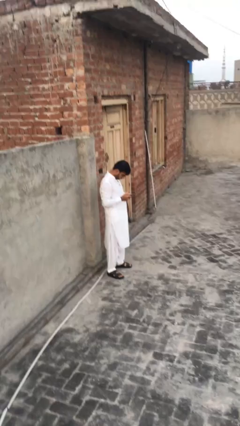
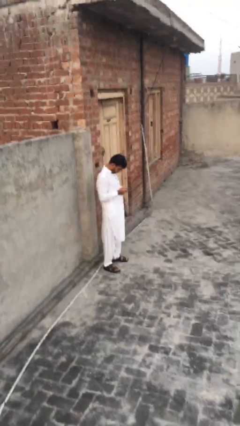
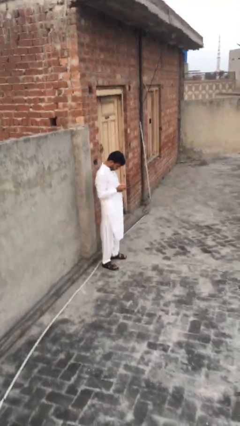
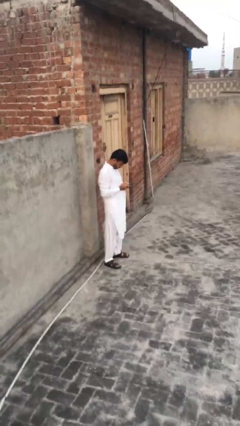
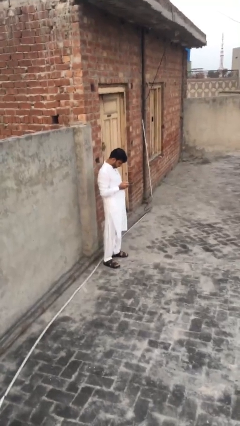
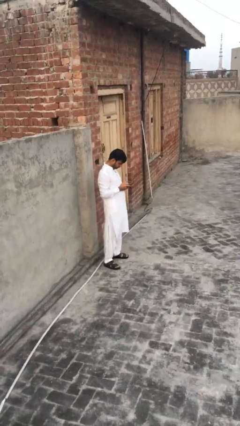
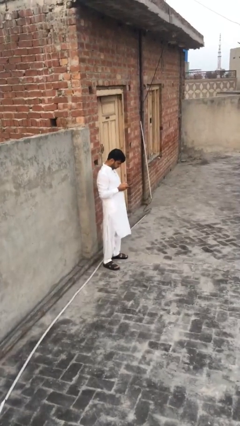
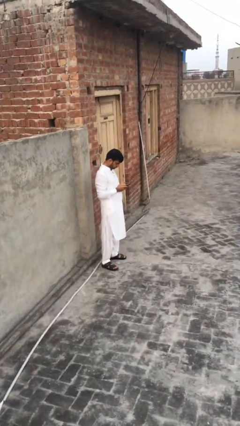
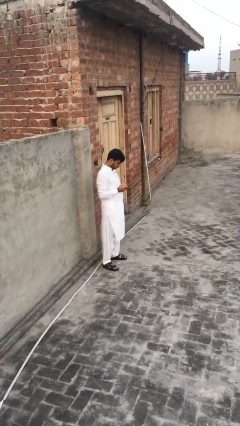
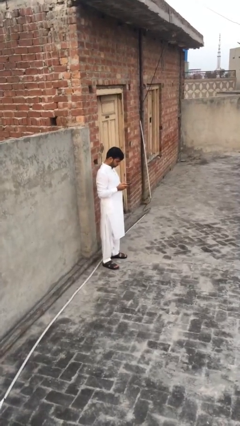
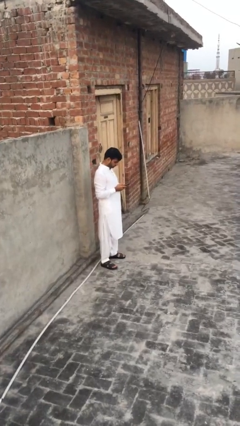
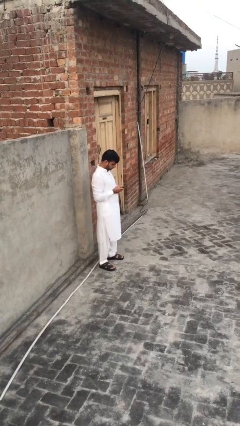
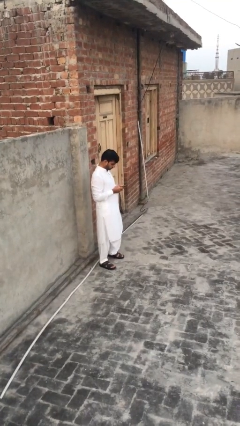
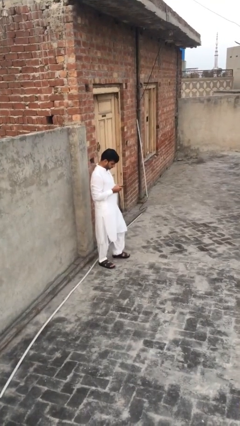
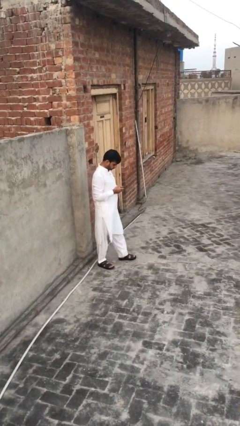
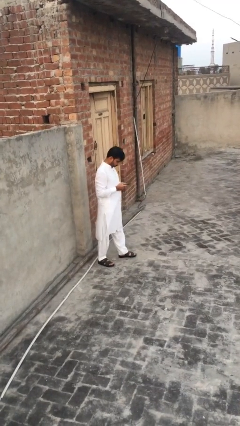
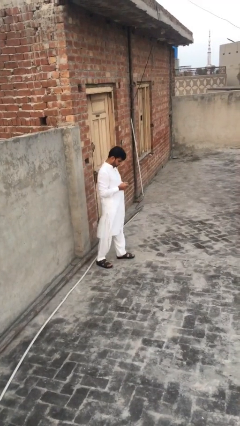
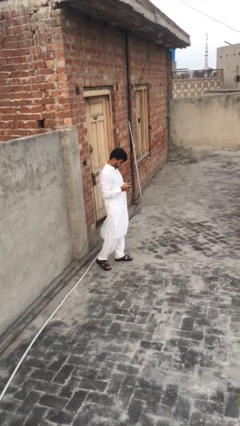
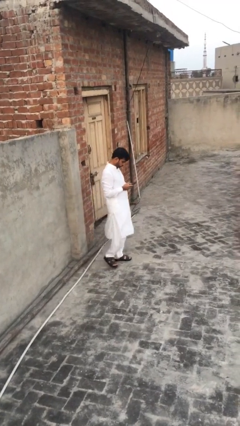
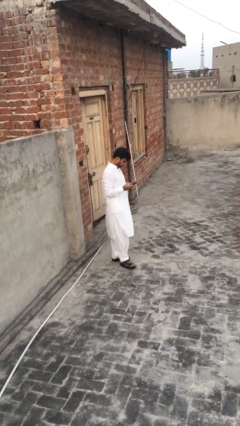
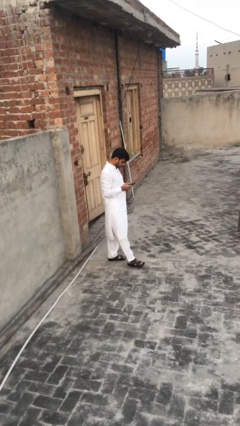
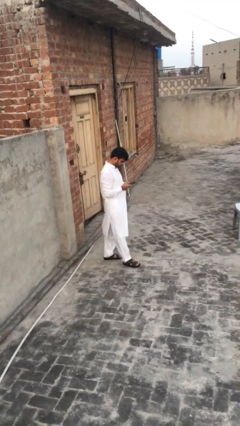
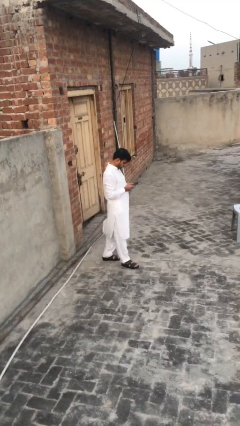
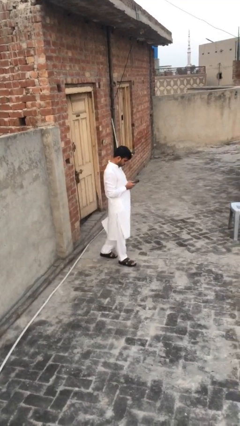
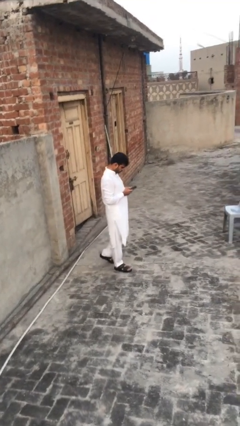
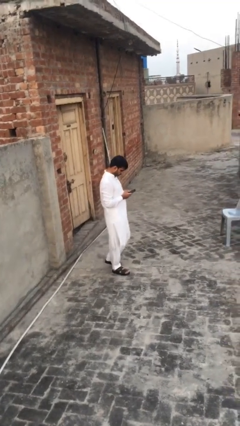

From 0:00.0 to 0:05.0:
person texts on phone

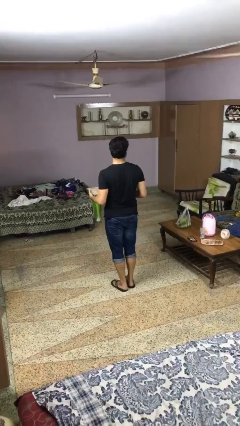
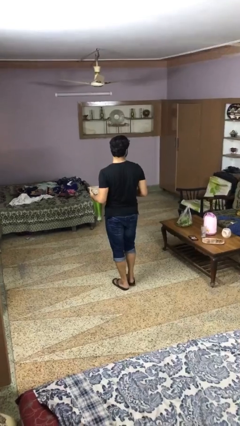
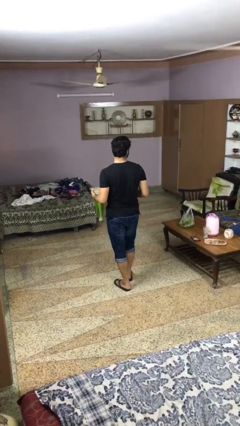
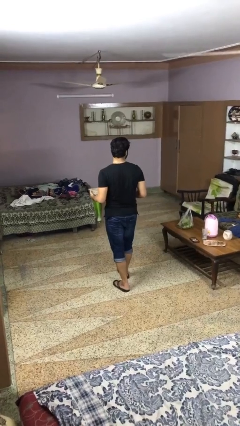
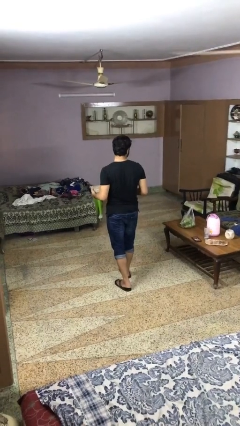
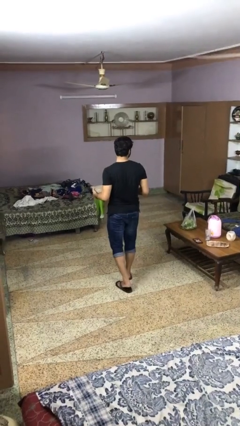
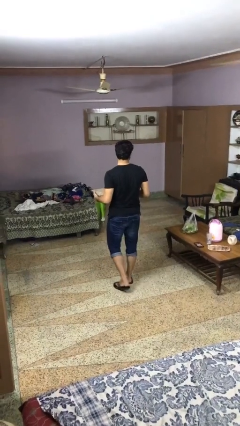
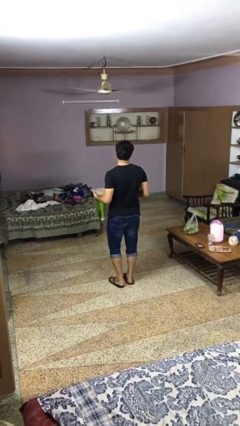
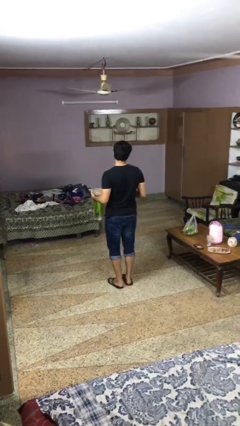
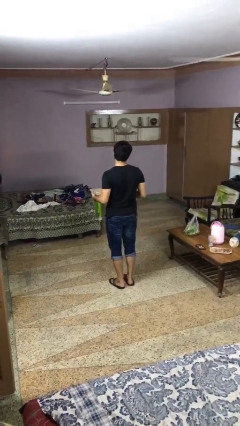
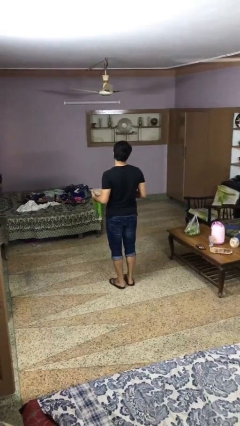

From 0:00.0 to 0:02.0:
person carries furniture

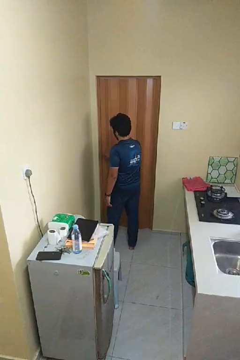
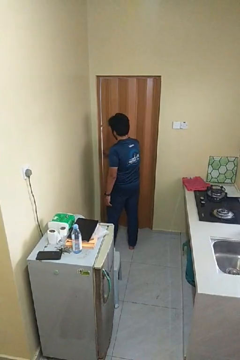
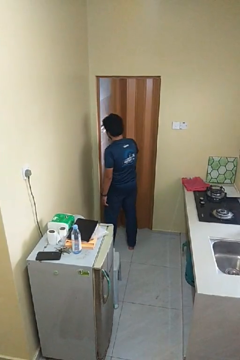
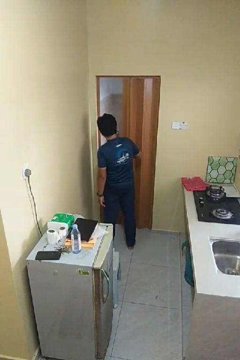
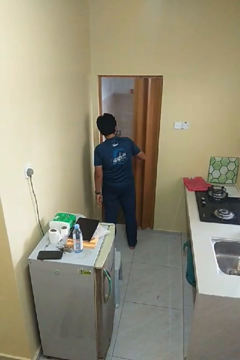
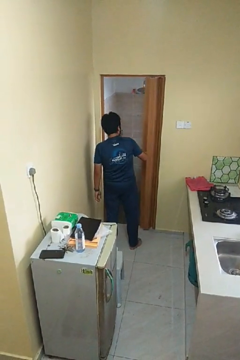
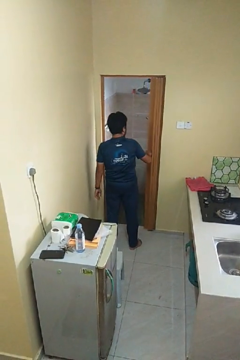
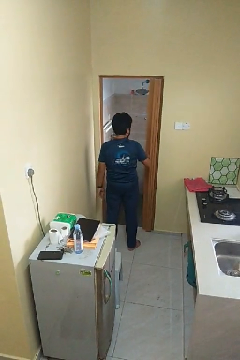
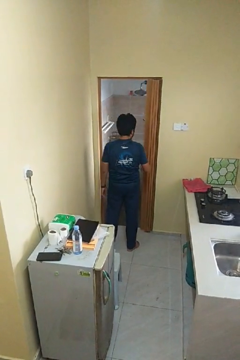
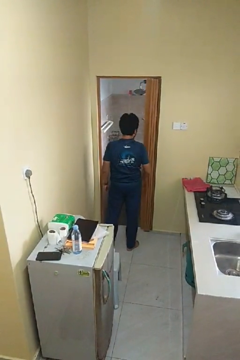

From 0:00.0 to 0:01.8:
person opens sliding door

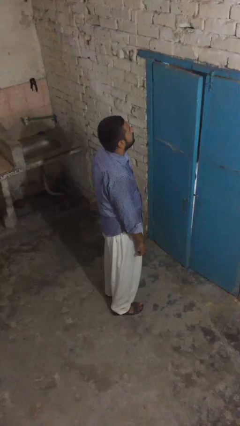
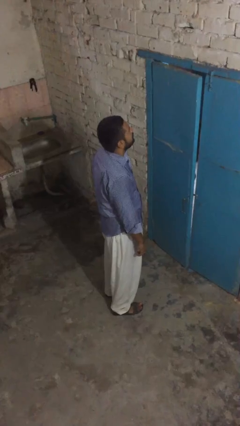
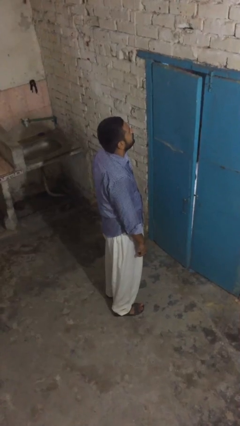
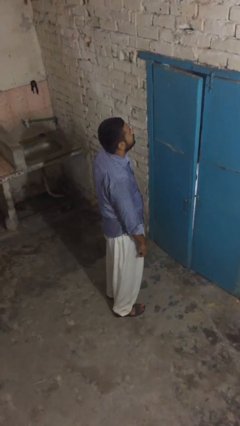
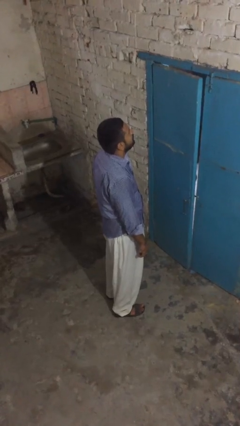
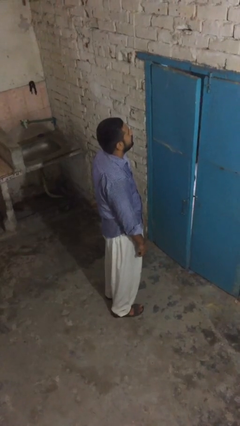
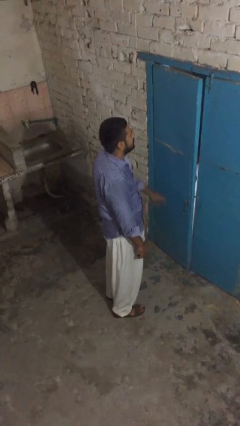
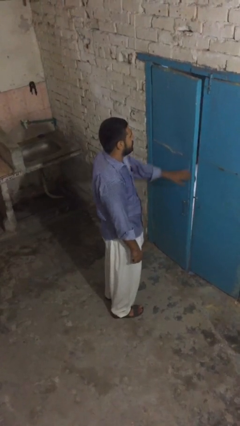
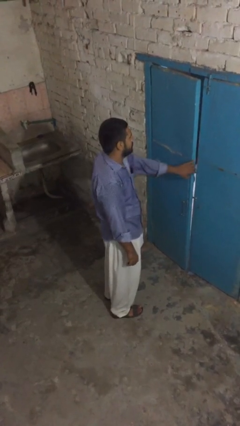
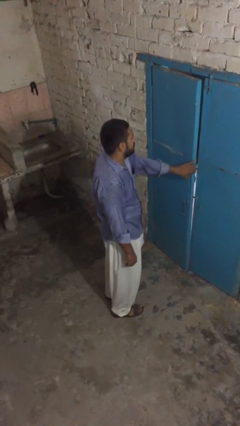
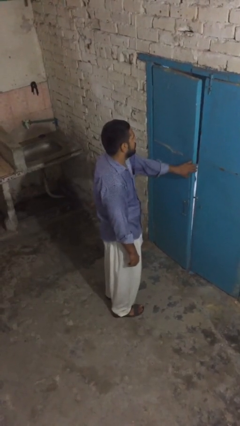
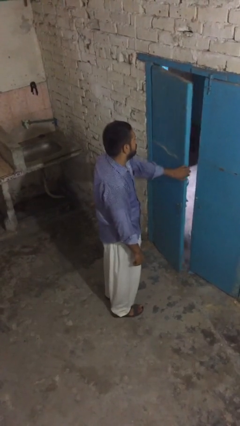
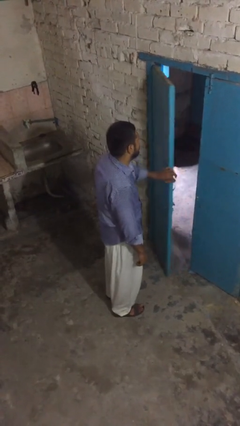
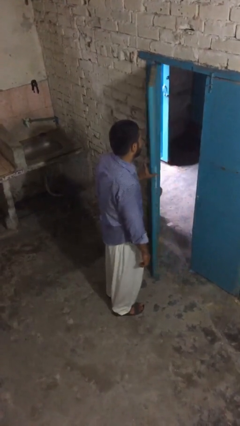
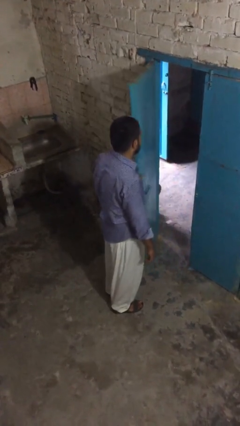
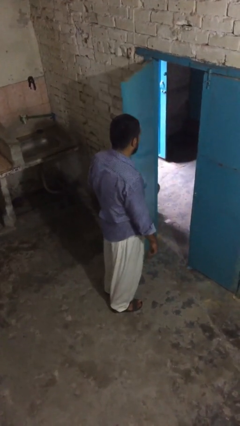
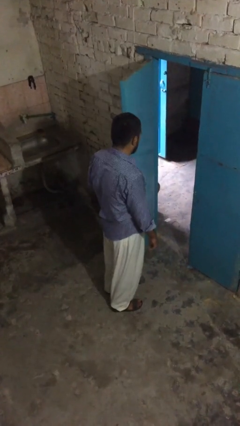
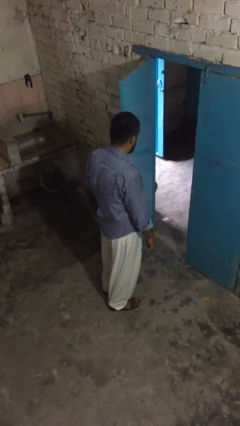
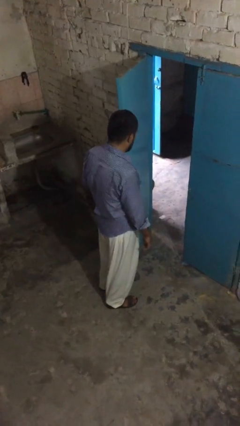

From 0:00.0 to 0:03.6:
person opens facility door

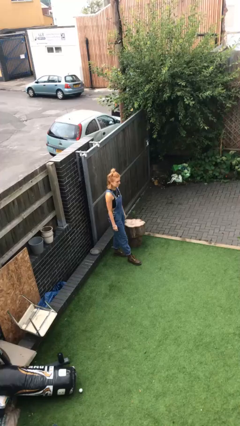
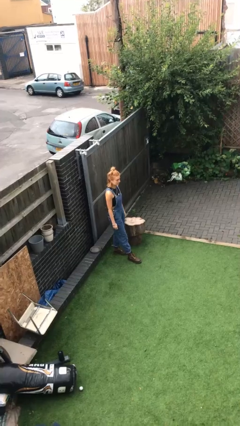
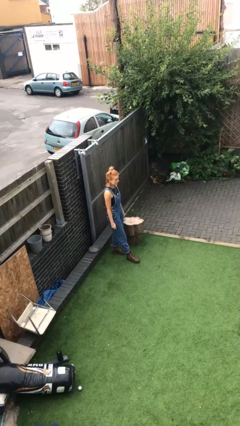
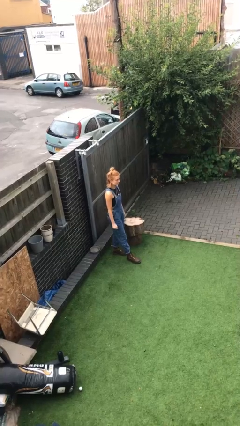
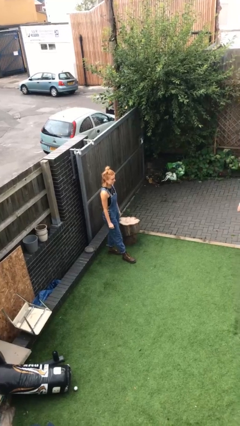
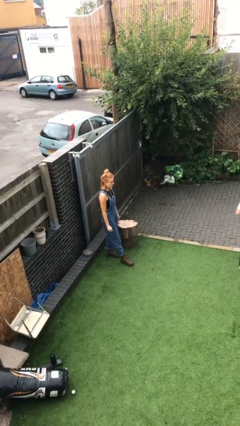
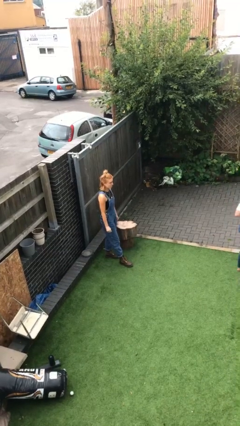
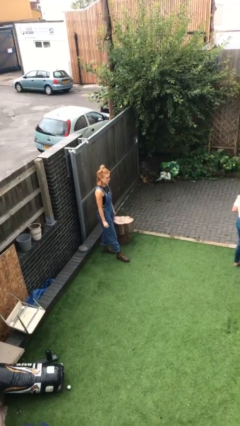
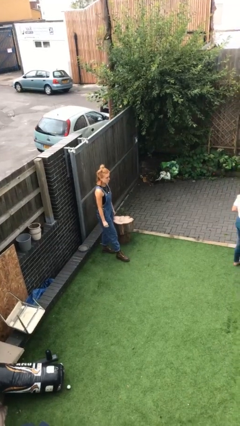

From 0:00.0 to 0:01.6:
person steals object from person

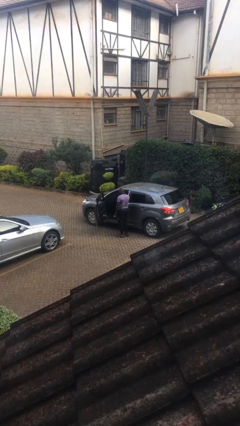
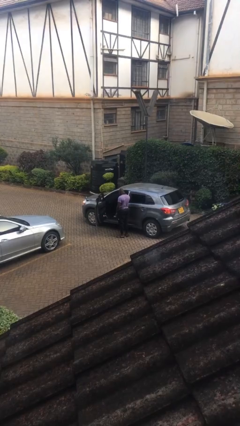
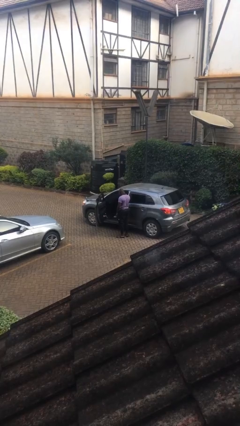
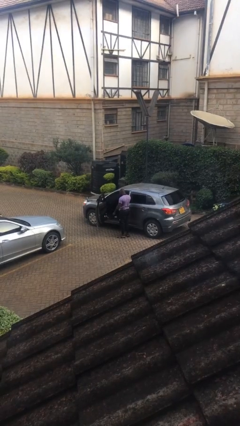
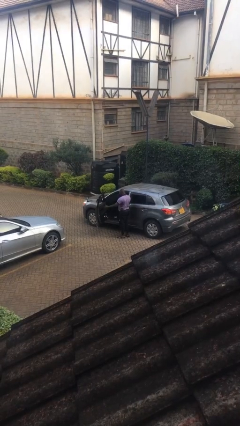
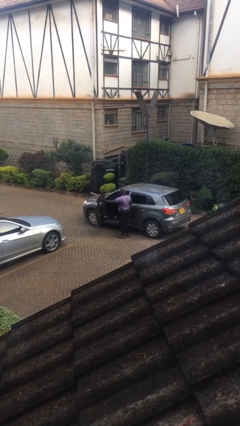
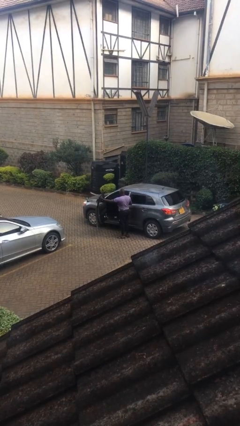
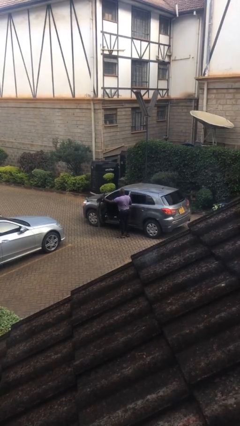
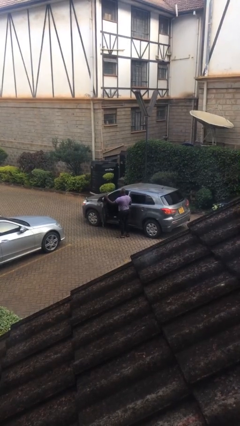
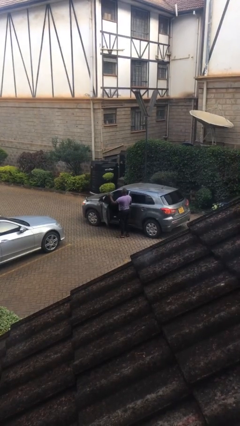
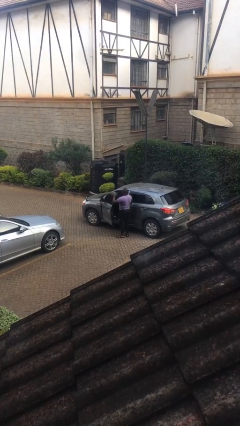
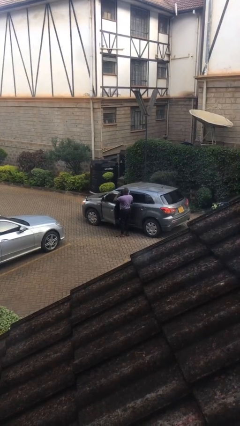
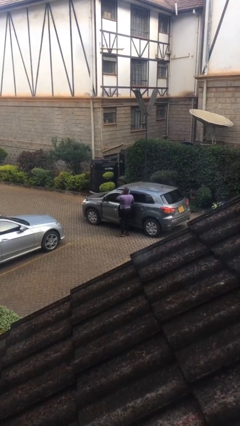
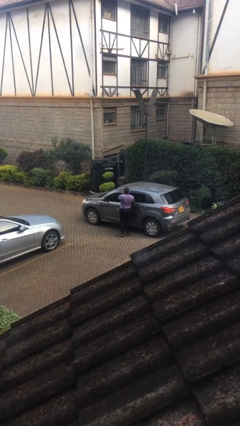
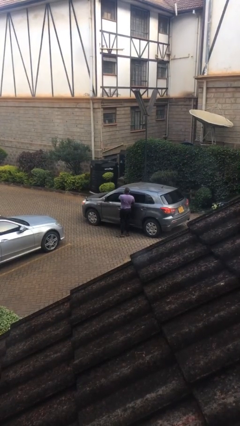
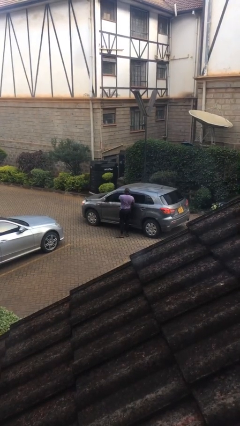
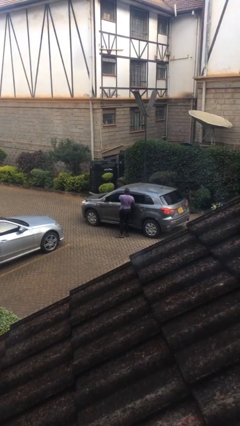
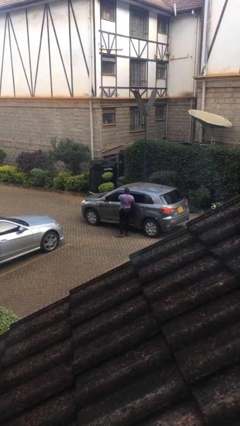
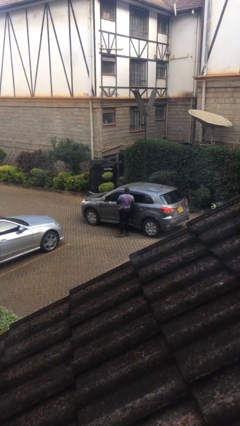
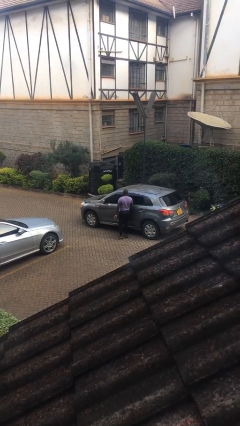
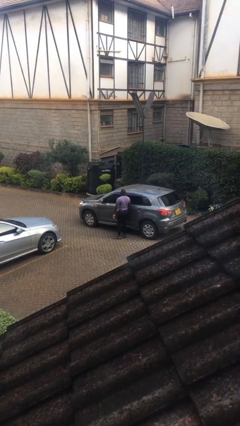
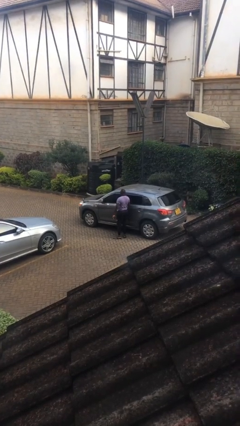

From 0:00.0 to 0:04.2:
person closes car door
